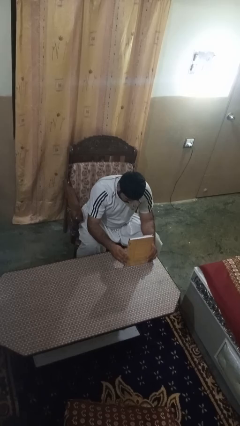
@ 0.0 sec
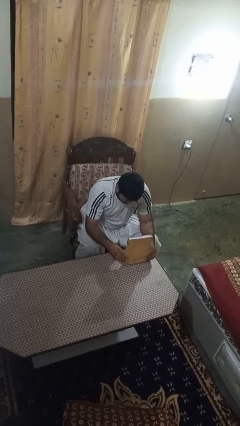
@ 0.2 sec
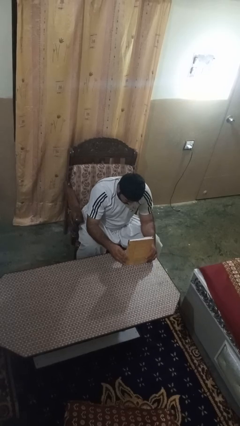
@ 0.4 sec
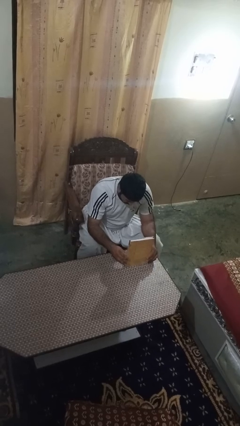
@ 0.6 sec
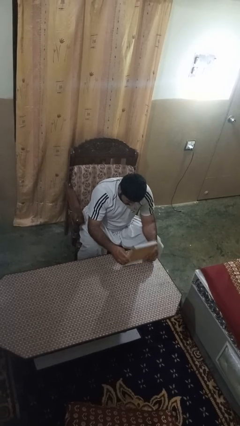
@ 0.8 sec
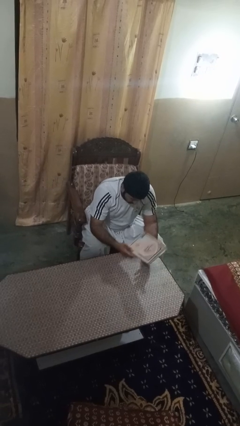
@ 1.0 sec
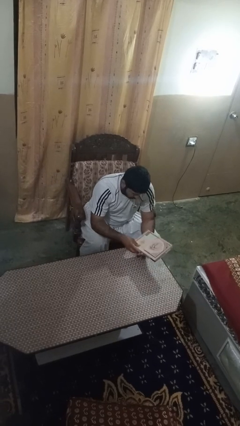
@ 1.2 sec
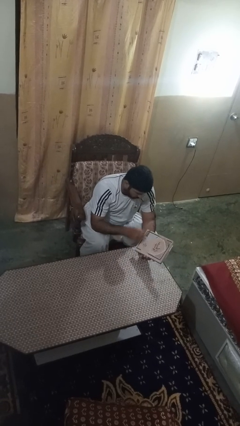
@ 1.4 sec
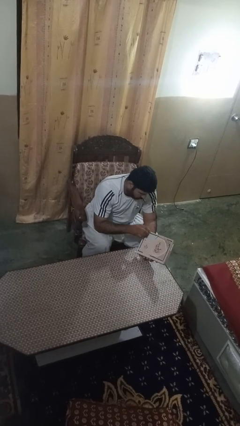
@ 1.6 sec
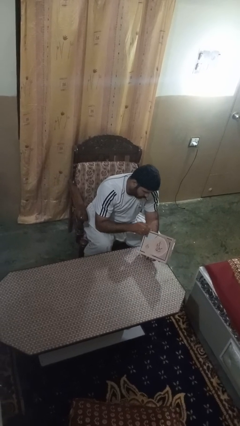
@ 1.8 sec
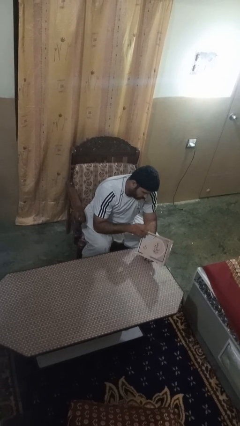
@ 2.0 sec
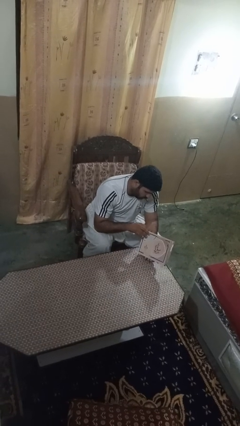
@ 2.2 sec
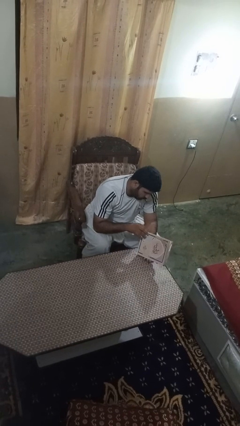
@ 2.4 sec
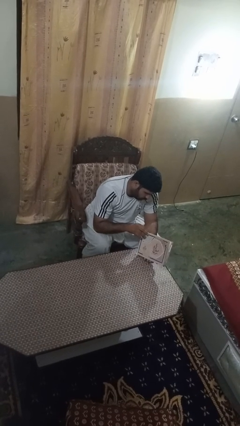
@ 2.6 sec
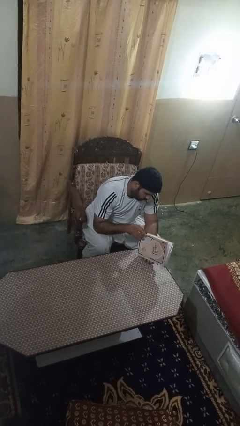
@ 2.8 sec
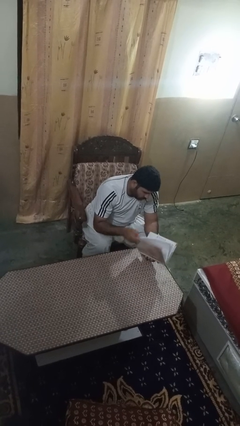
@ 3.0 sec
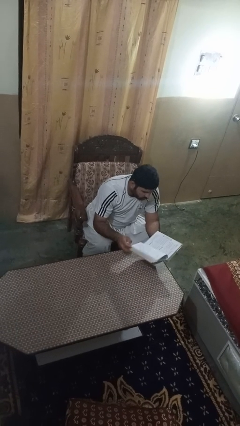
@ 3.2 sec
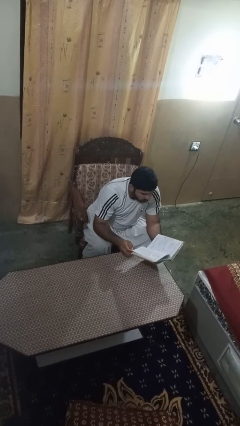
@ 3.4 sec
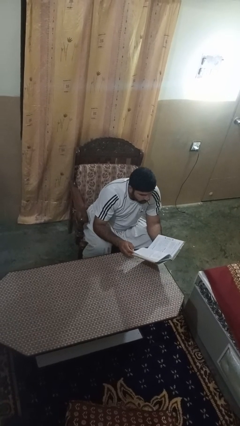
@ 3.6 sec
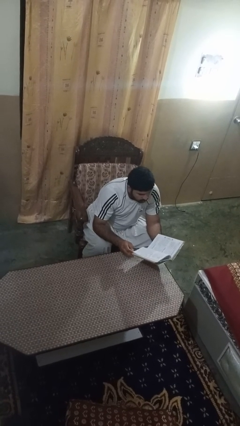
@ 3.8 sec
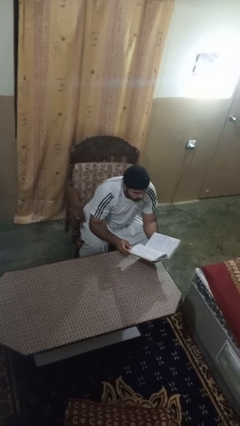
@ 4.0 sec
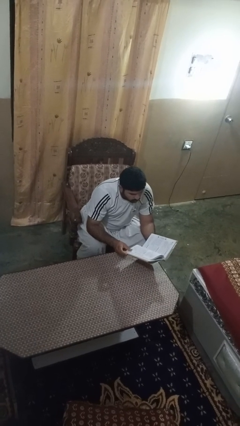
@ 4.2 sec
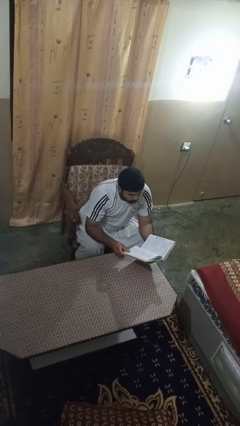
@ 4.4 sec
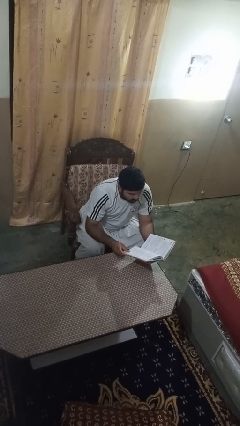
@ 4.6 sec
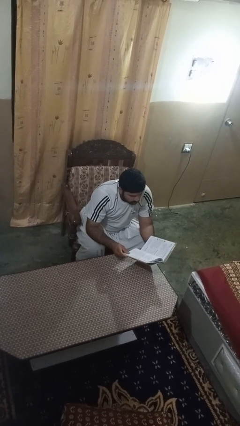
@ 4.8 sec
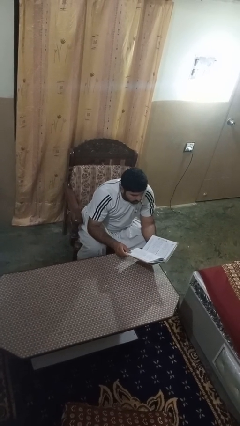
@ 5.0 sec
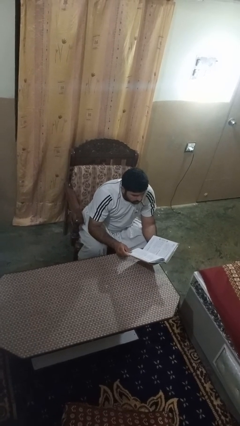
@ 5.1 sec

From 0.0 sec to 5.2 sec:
person reads book

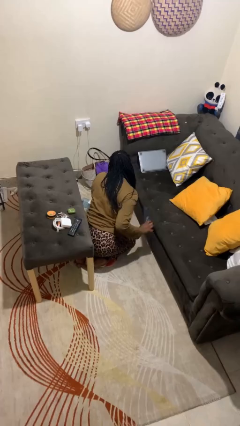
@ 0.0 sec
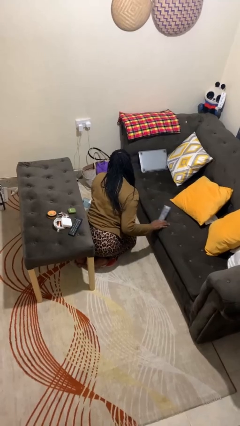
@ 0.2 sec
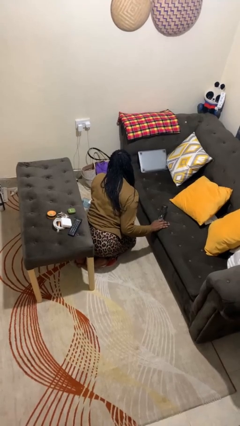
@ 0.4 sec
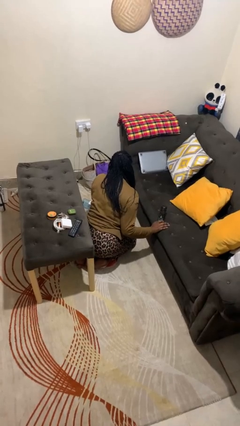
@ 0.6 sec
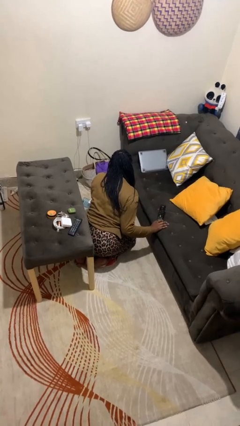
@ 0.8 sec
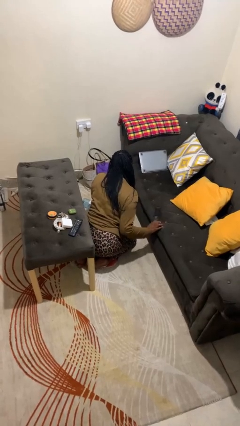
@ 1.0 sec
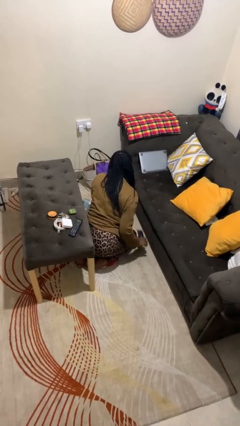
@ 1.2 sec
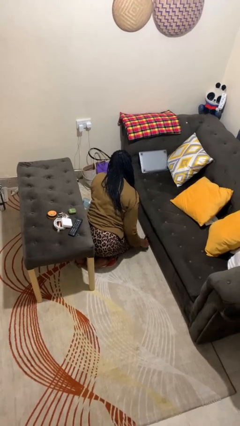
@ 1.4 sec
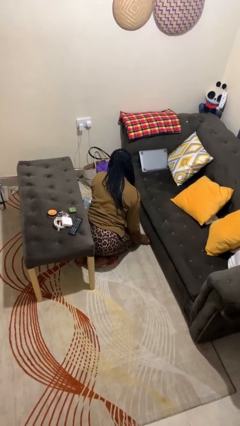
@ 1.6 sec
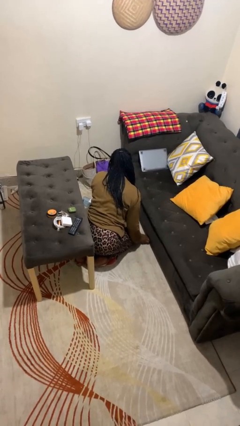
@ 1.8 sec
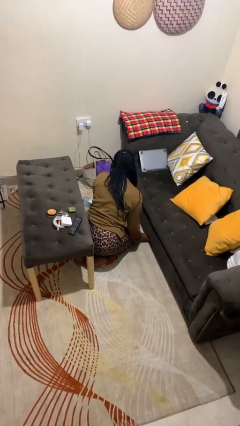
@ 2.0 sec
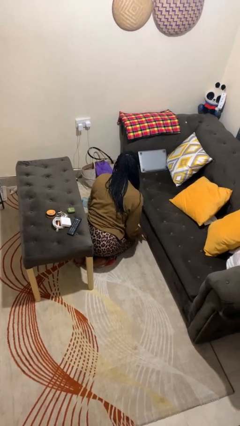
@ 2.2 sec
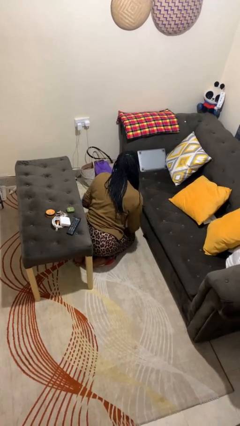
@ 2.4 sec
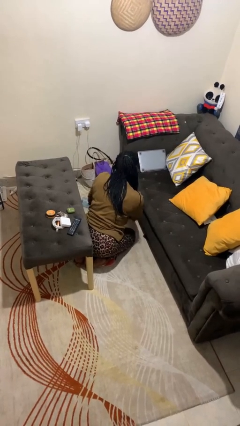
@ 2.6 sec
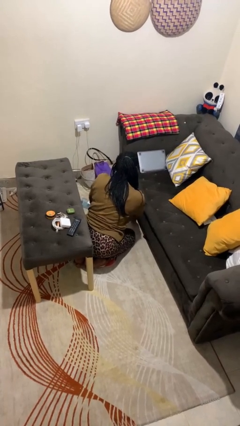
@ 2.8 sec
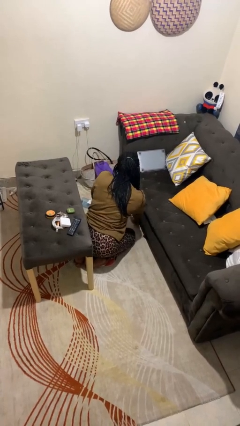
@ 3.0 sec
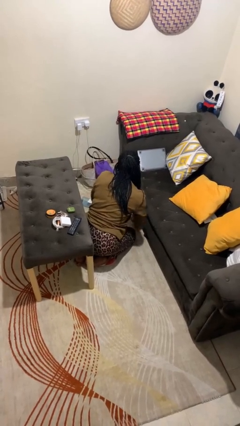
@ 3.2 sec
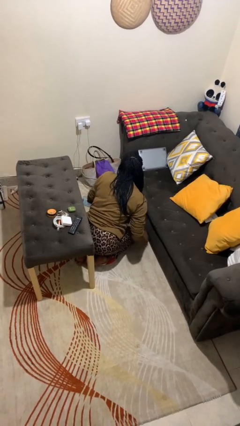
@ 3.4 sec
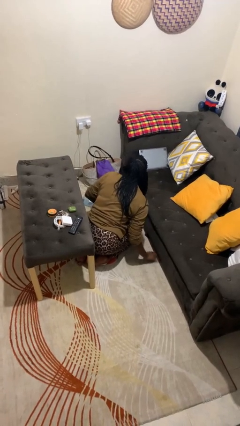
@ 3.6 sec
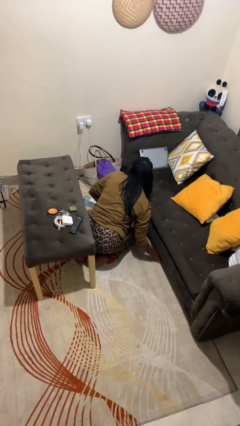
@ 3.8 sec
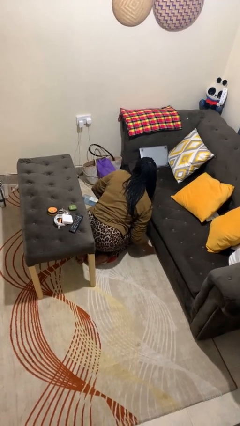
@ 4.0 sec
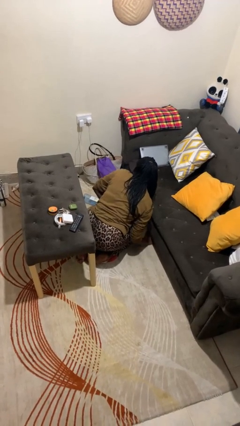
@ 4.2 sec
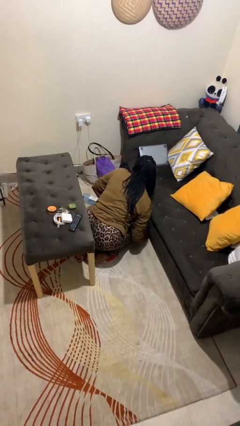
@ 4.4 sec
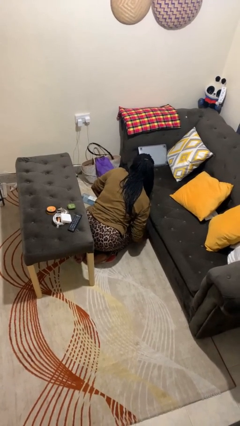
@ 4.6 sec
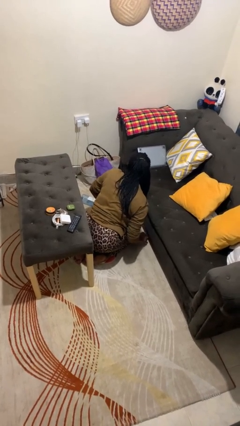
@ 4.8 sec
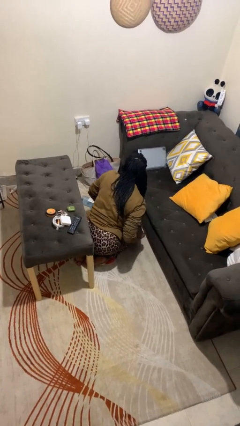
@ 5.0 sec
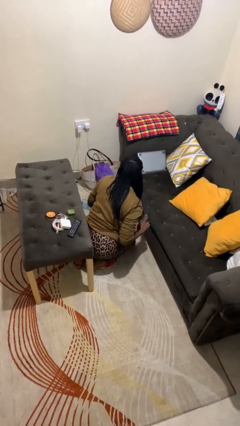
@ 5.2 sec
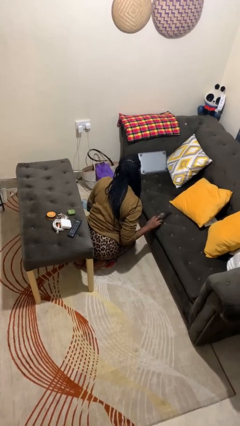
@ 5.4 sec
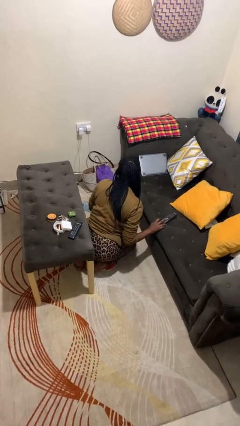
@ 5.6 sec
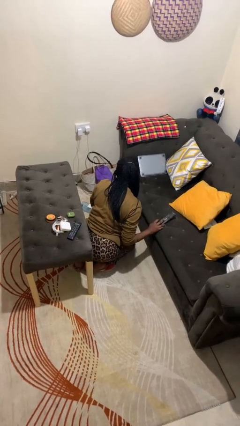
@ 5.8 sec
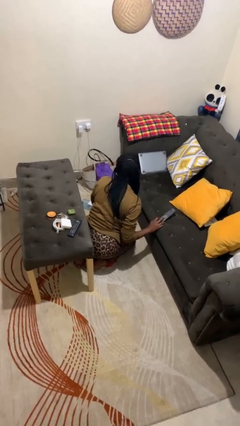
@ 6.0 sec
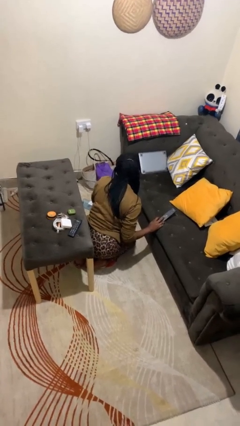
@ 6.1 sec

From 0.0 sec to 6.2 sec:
person searches under couch

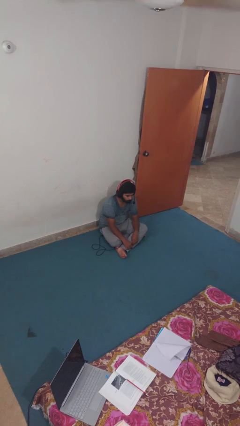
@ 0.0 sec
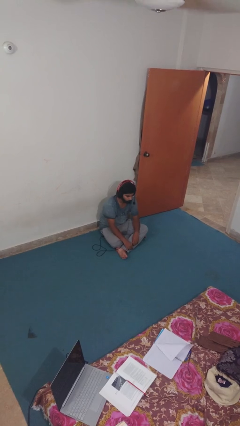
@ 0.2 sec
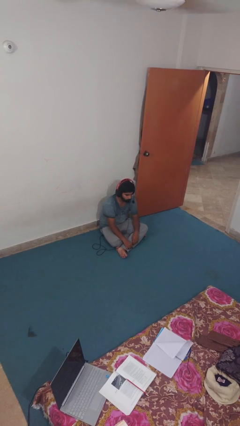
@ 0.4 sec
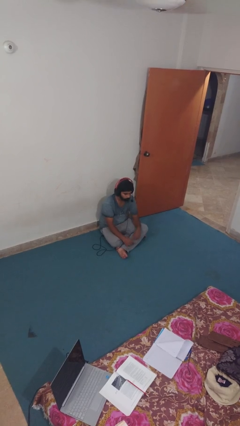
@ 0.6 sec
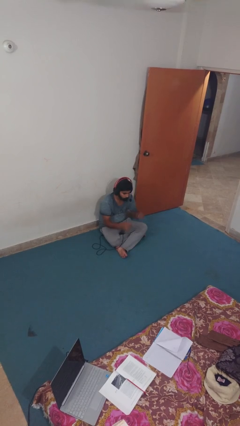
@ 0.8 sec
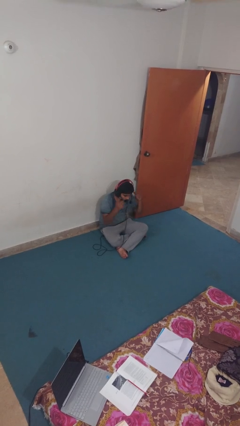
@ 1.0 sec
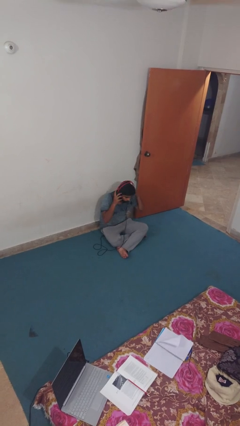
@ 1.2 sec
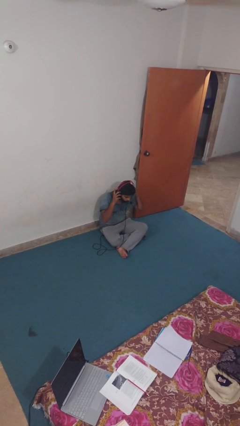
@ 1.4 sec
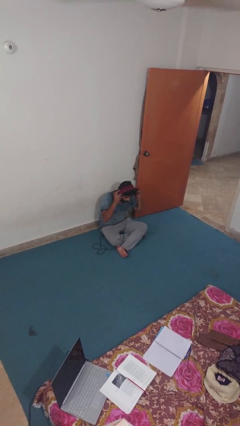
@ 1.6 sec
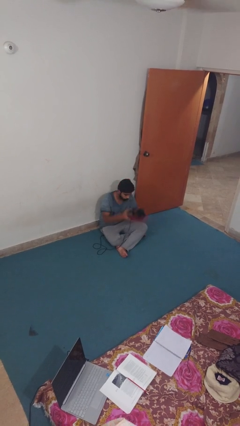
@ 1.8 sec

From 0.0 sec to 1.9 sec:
person takes off headphones

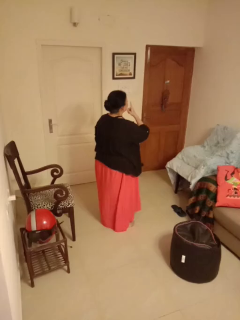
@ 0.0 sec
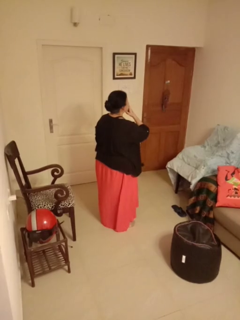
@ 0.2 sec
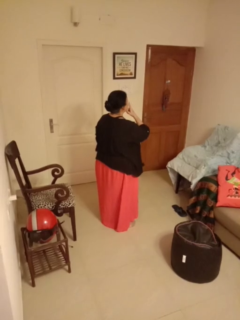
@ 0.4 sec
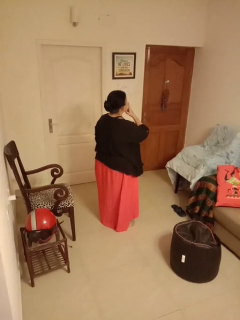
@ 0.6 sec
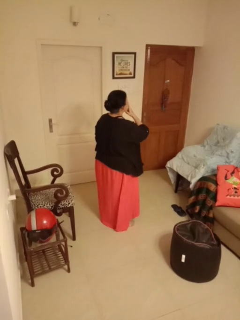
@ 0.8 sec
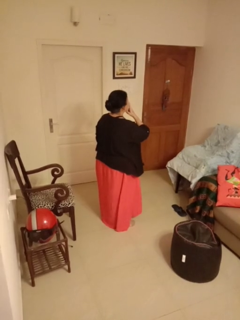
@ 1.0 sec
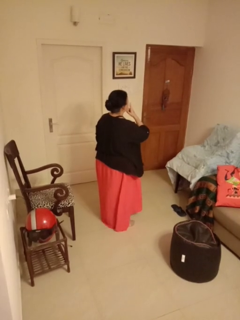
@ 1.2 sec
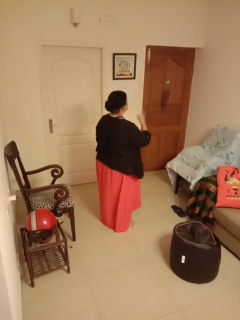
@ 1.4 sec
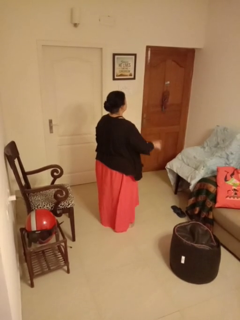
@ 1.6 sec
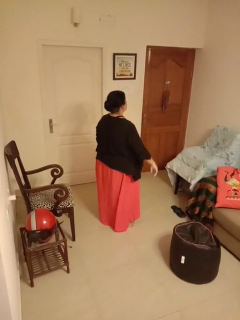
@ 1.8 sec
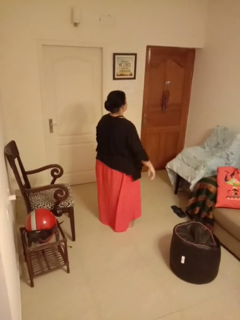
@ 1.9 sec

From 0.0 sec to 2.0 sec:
person gestures be quiet

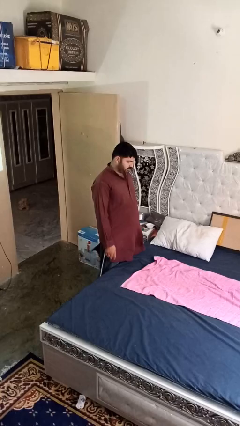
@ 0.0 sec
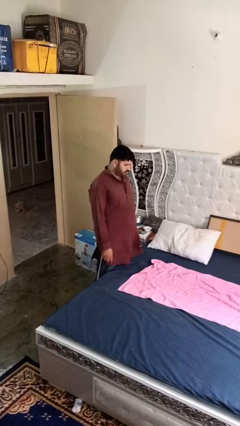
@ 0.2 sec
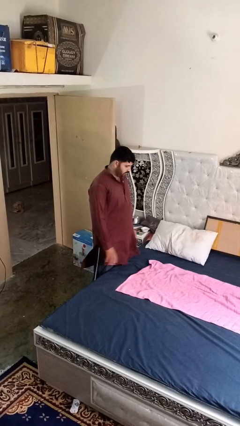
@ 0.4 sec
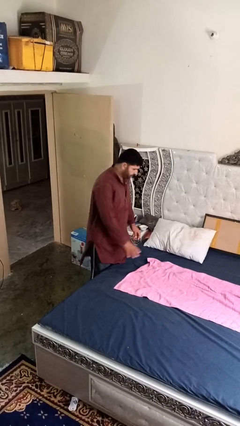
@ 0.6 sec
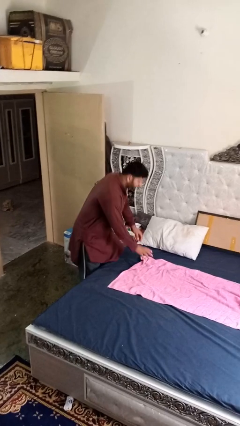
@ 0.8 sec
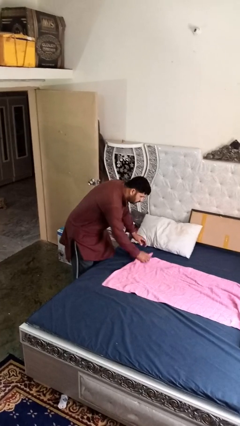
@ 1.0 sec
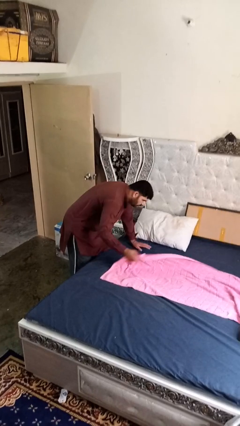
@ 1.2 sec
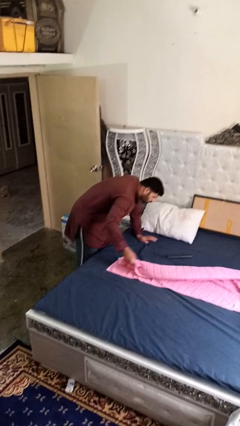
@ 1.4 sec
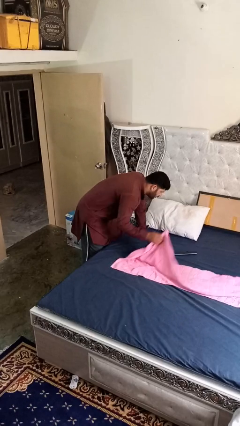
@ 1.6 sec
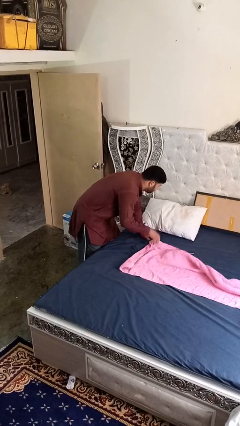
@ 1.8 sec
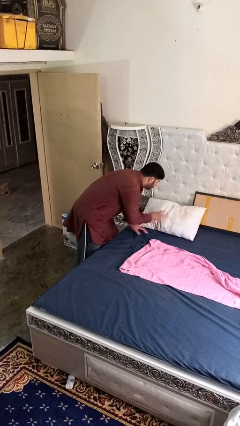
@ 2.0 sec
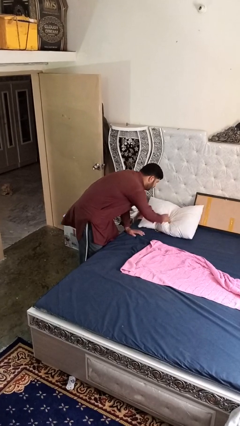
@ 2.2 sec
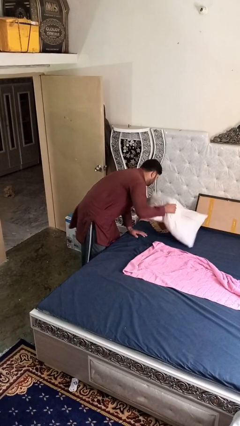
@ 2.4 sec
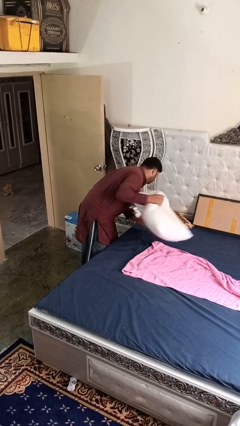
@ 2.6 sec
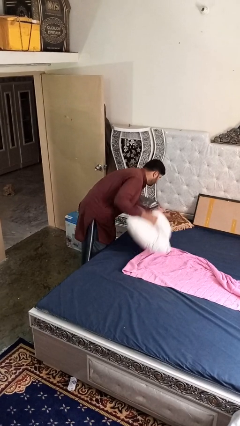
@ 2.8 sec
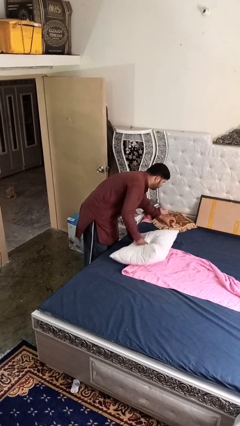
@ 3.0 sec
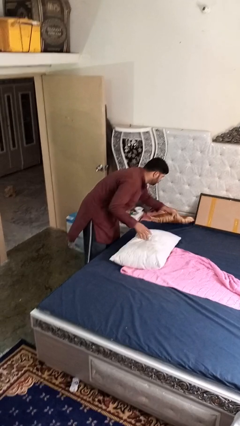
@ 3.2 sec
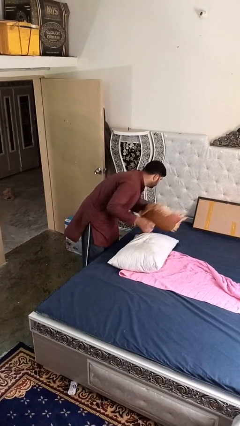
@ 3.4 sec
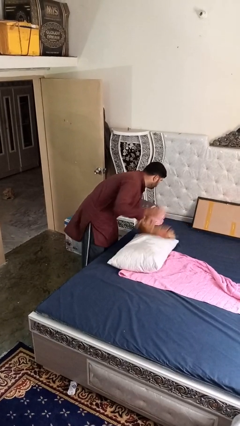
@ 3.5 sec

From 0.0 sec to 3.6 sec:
person searches under bed
